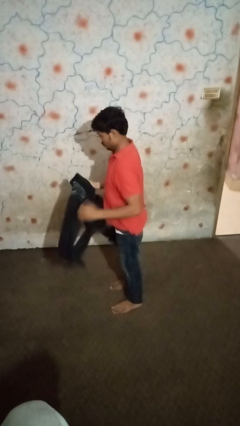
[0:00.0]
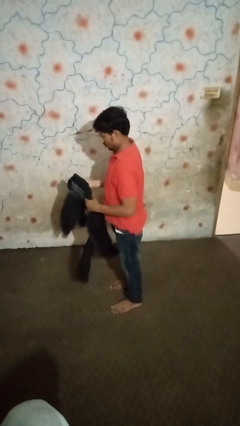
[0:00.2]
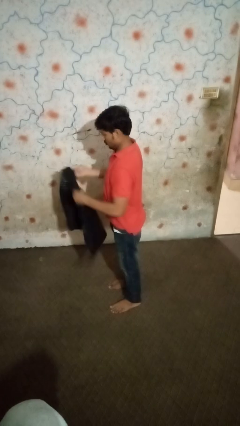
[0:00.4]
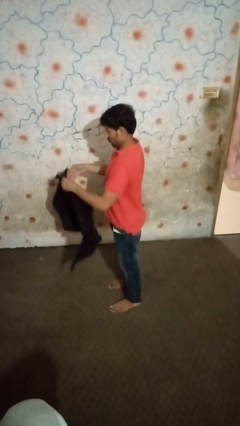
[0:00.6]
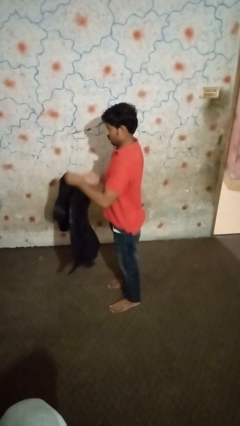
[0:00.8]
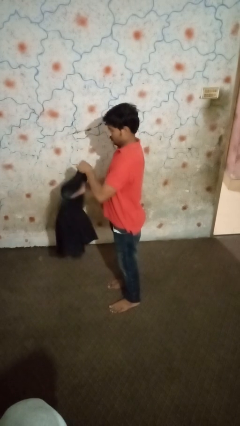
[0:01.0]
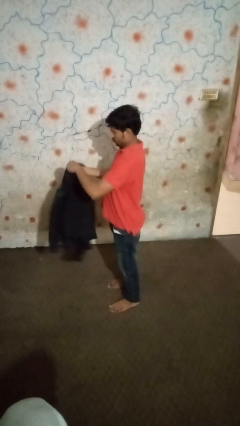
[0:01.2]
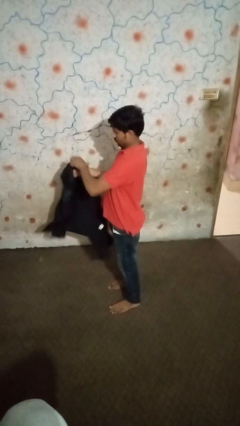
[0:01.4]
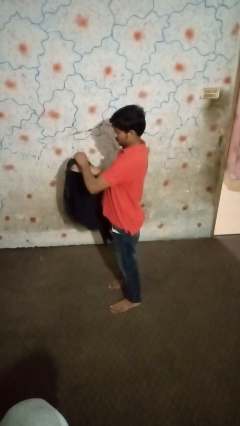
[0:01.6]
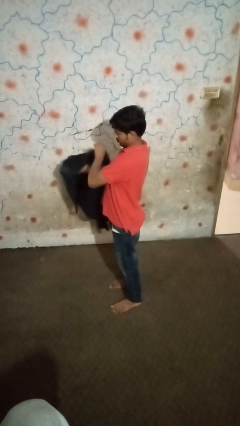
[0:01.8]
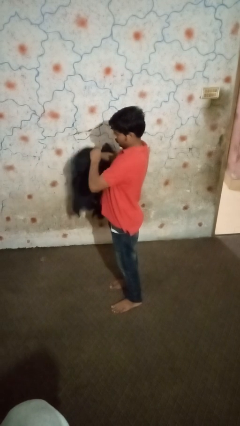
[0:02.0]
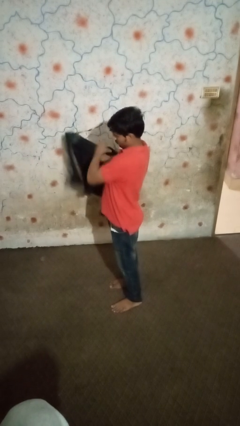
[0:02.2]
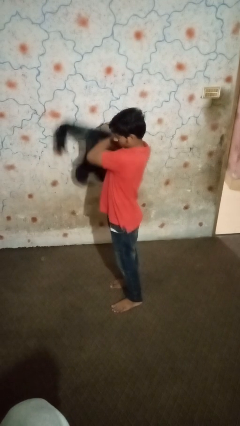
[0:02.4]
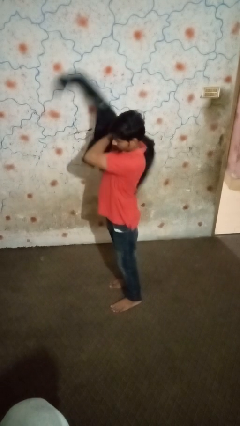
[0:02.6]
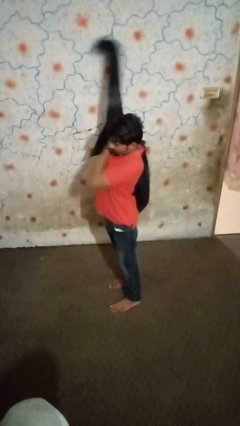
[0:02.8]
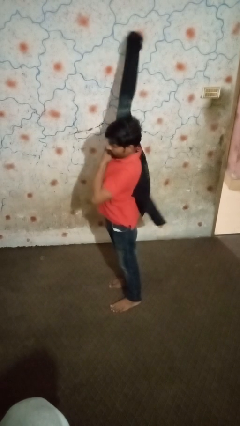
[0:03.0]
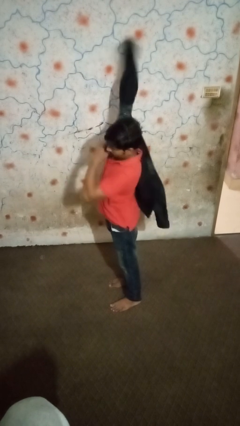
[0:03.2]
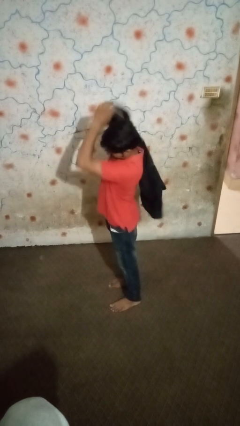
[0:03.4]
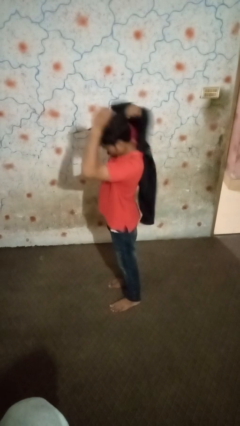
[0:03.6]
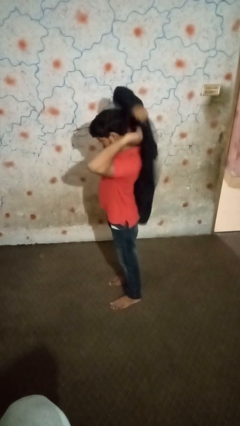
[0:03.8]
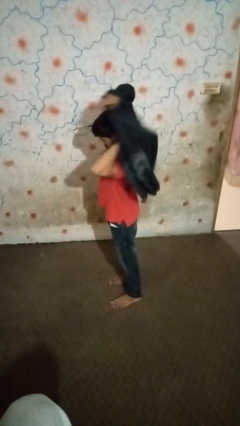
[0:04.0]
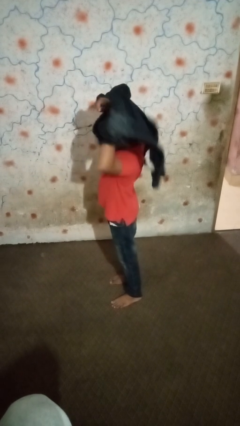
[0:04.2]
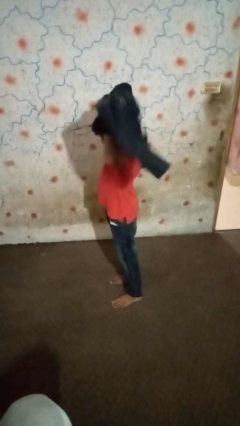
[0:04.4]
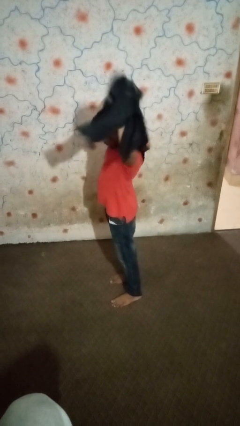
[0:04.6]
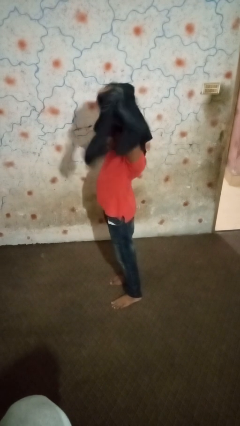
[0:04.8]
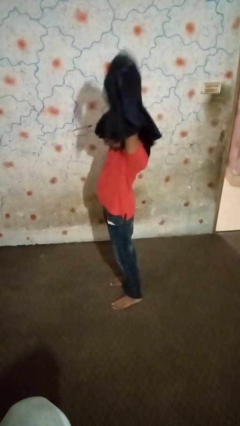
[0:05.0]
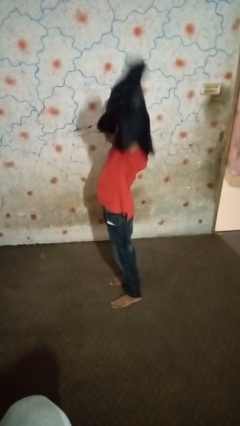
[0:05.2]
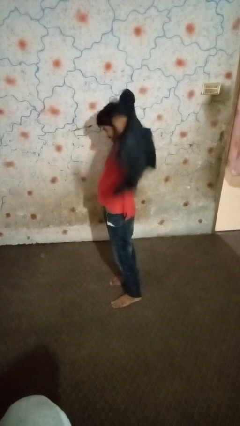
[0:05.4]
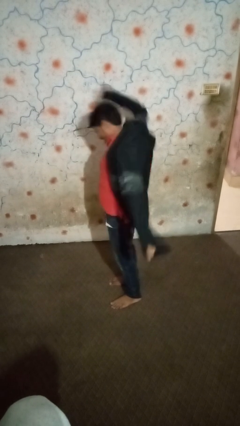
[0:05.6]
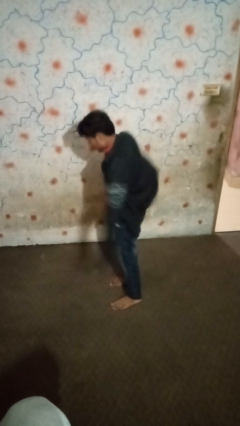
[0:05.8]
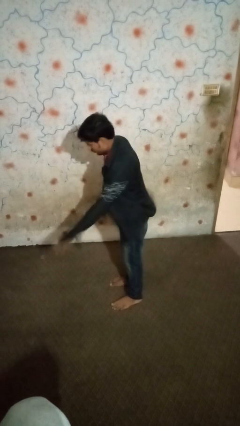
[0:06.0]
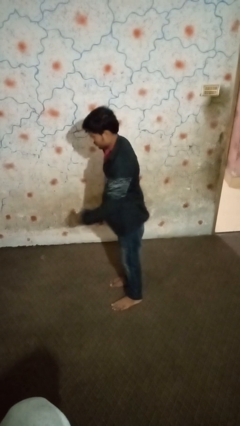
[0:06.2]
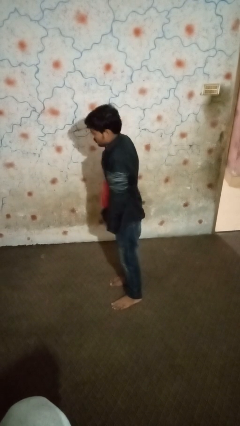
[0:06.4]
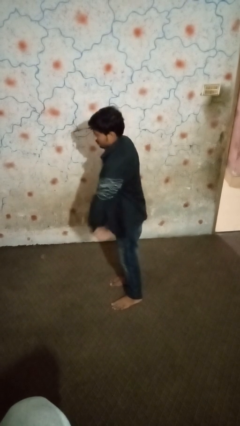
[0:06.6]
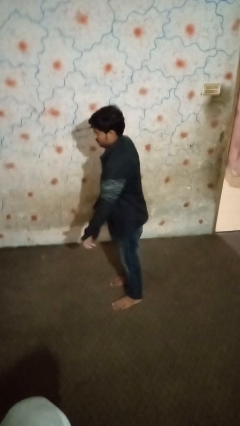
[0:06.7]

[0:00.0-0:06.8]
person puts on shirt

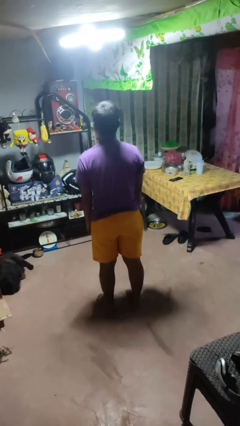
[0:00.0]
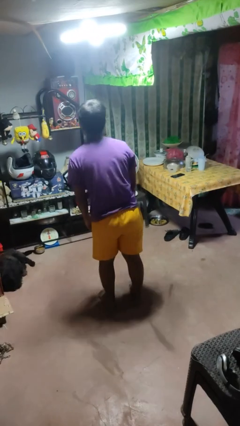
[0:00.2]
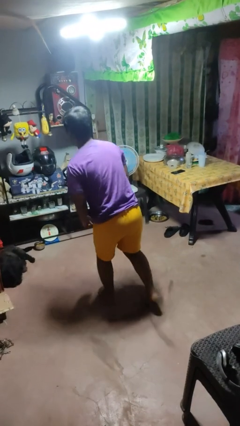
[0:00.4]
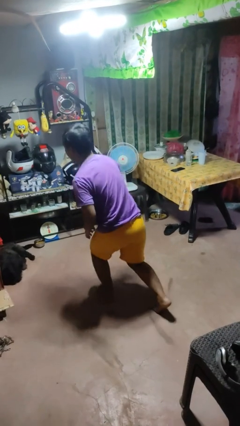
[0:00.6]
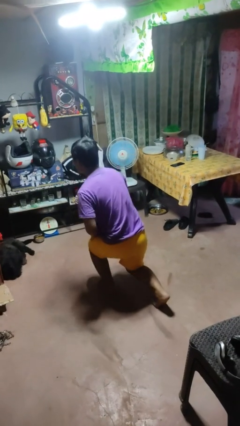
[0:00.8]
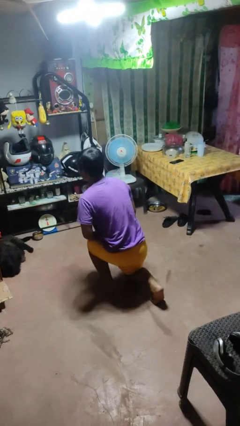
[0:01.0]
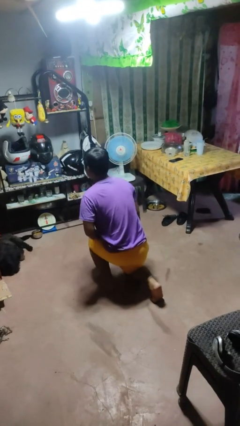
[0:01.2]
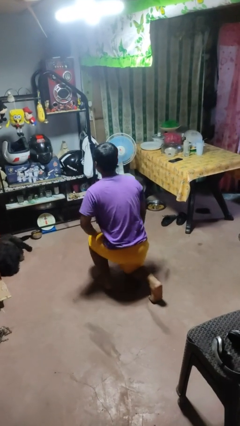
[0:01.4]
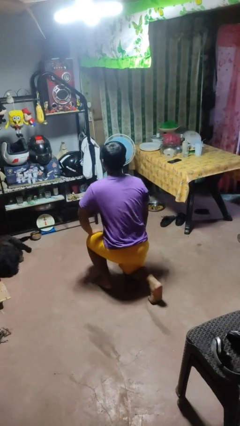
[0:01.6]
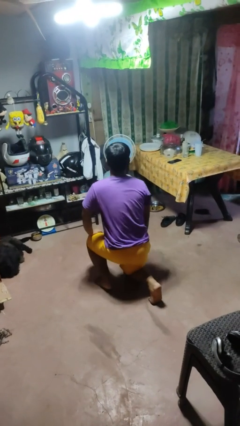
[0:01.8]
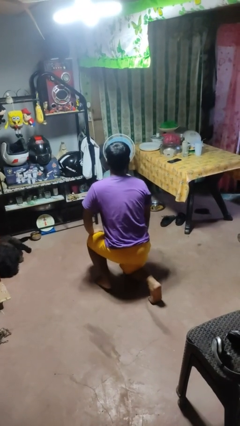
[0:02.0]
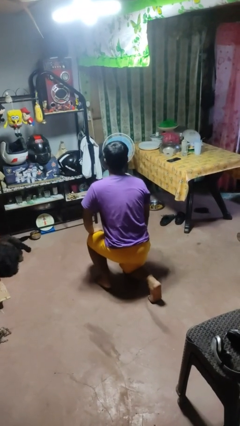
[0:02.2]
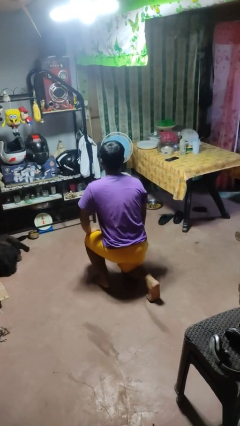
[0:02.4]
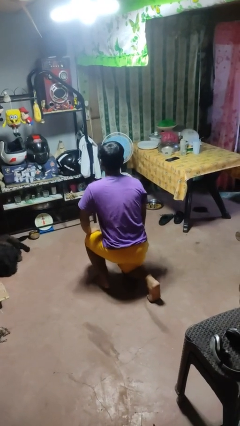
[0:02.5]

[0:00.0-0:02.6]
person kneels

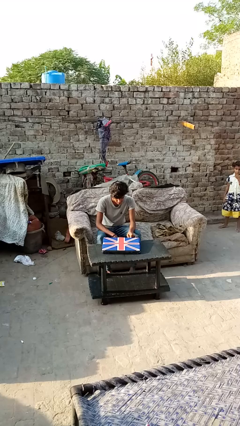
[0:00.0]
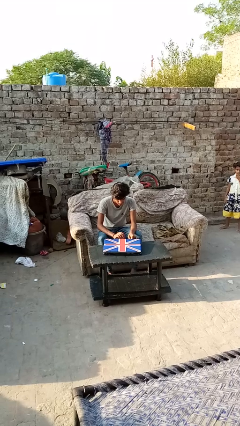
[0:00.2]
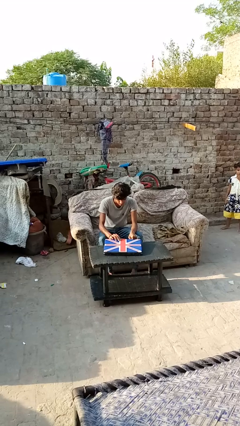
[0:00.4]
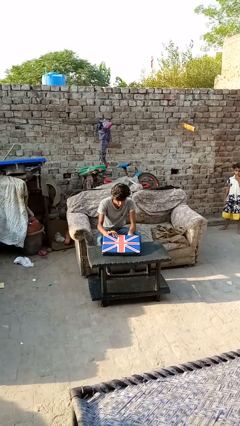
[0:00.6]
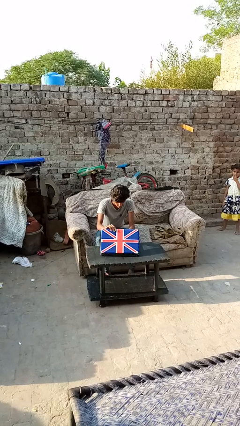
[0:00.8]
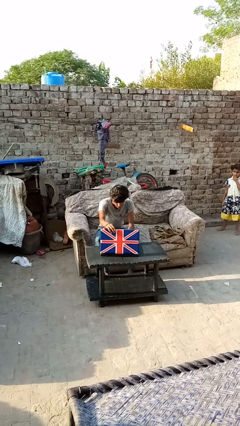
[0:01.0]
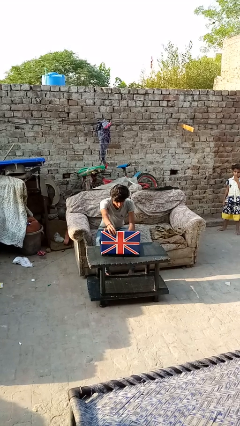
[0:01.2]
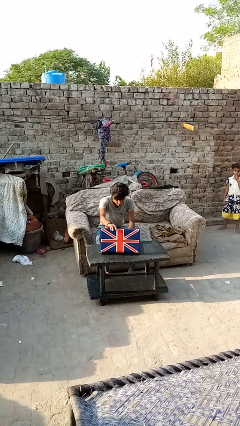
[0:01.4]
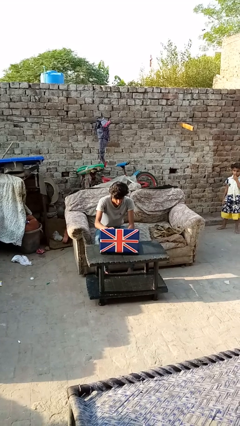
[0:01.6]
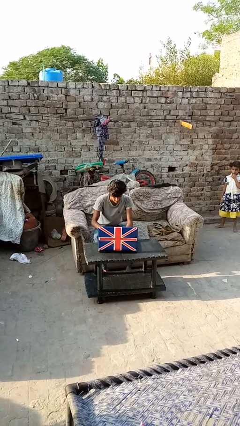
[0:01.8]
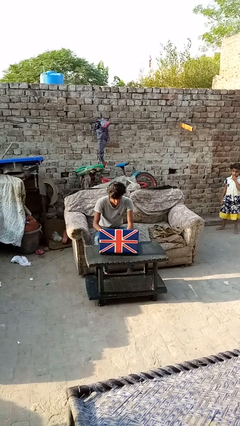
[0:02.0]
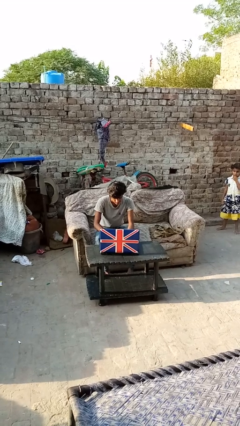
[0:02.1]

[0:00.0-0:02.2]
person opens laptop

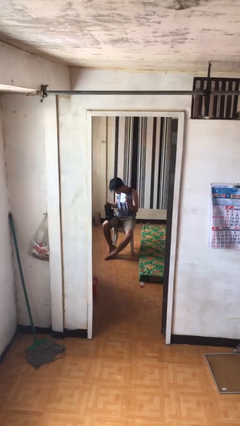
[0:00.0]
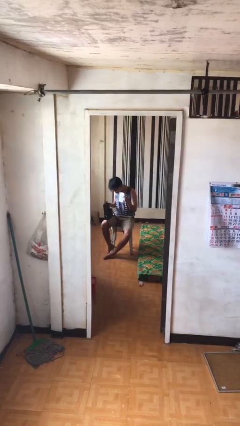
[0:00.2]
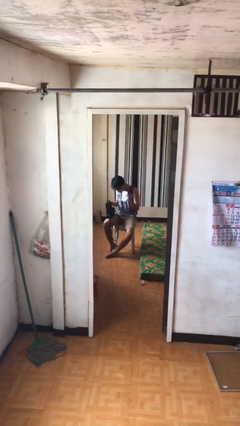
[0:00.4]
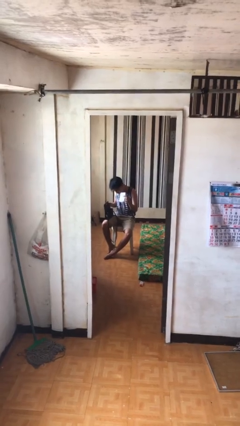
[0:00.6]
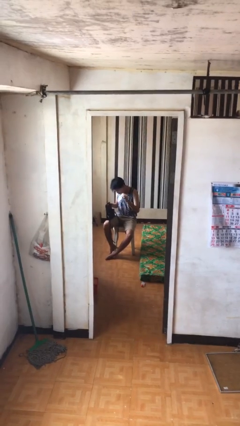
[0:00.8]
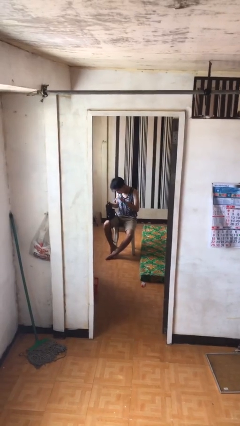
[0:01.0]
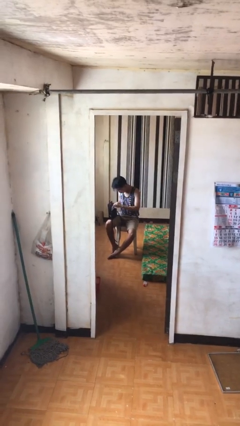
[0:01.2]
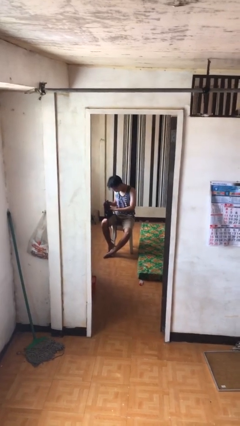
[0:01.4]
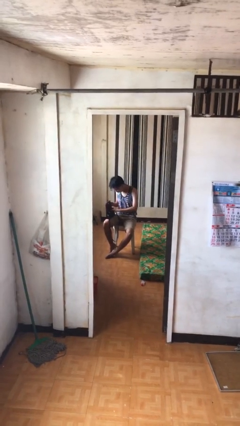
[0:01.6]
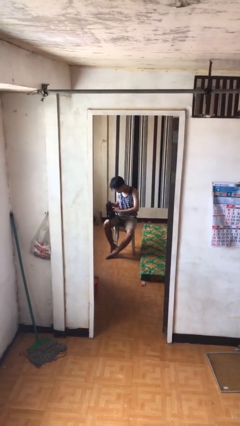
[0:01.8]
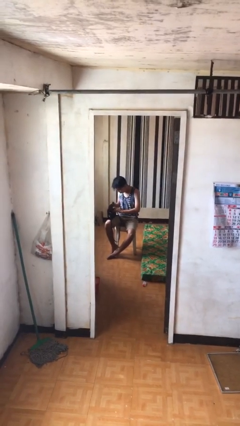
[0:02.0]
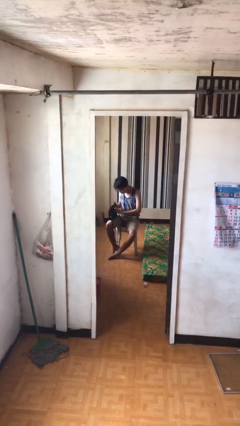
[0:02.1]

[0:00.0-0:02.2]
person puts object into purse

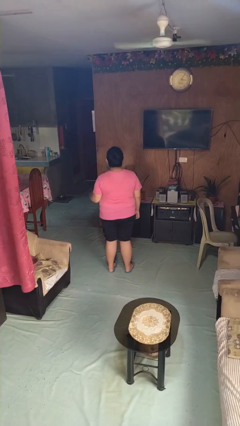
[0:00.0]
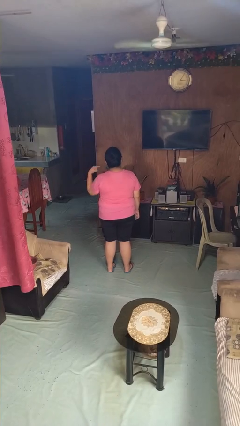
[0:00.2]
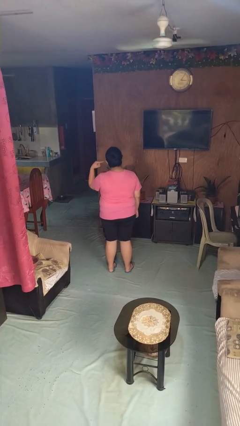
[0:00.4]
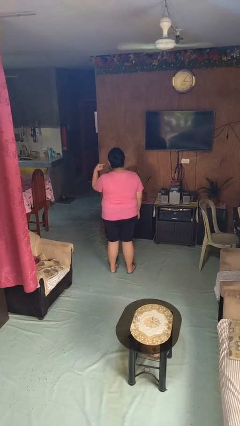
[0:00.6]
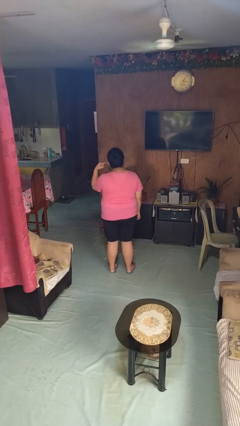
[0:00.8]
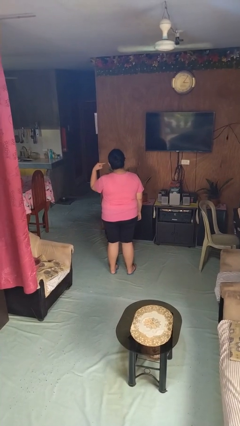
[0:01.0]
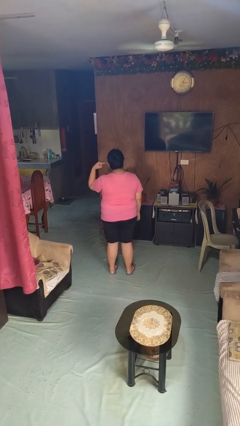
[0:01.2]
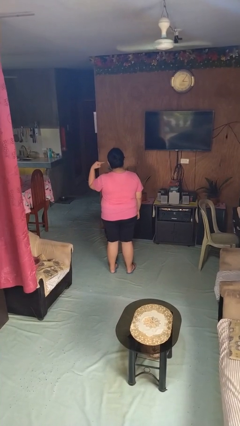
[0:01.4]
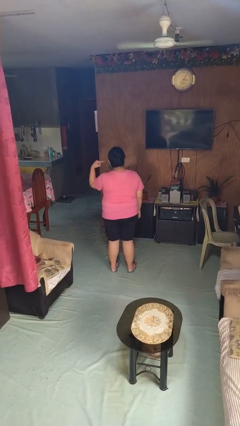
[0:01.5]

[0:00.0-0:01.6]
person gestures listen closely

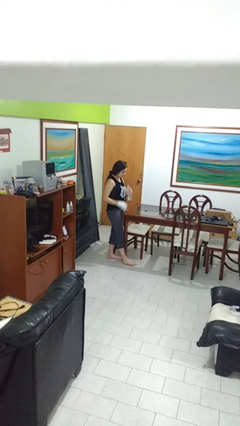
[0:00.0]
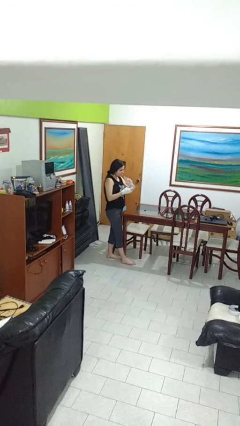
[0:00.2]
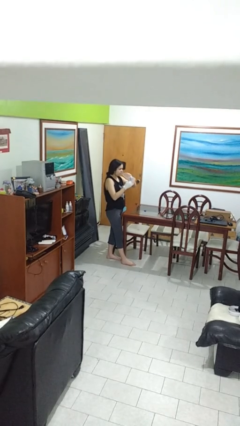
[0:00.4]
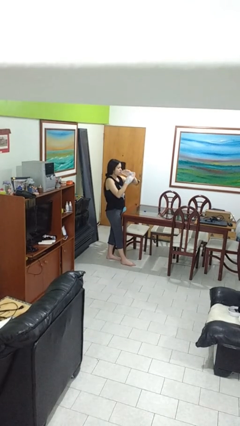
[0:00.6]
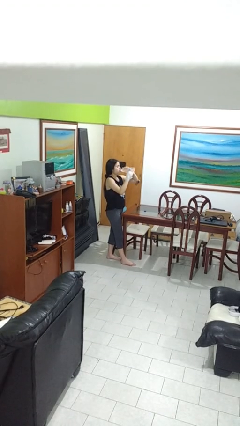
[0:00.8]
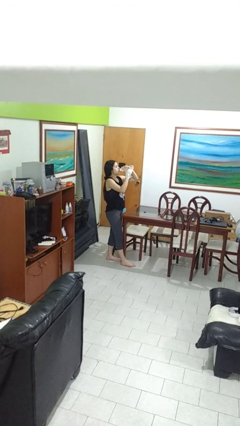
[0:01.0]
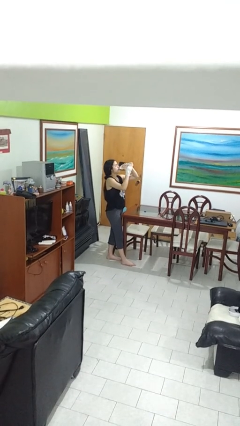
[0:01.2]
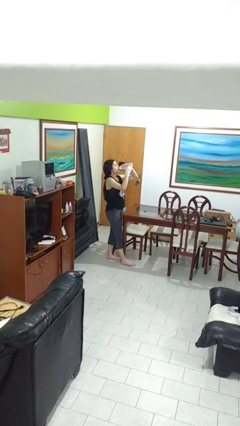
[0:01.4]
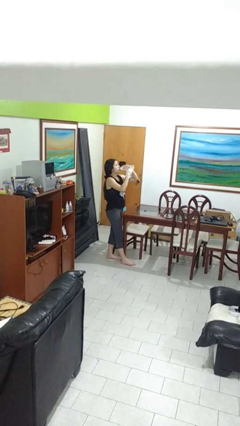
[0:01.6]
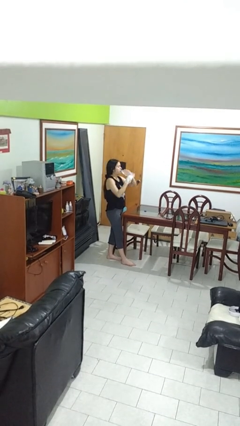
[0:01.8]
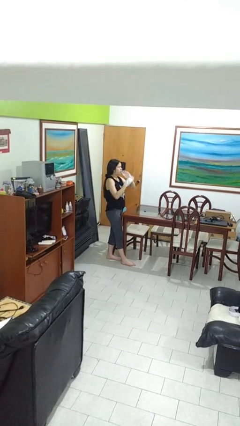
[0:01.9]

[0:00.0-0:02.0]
person drinks from bottle
